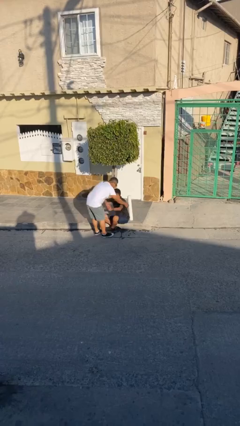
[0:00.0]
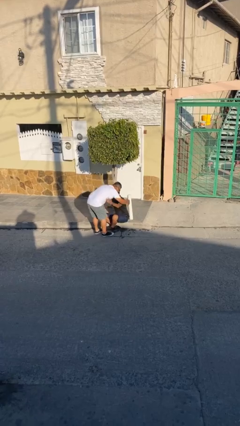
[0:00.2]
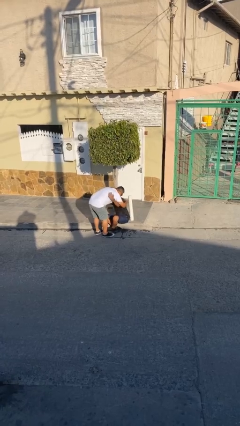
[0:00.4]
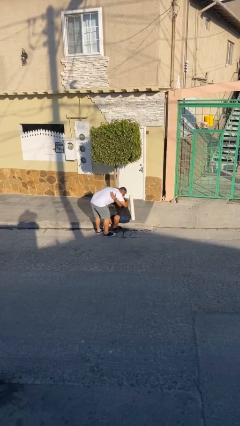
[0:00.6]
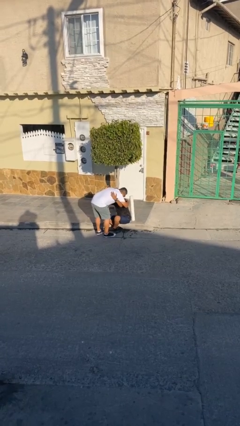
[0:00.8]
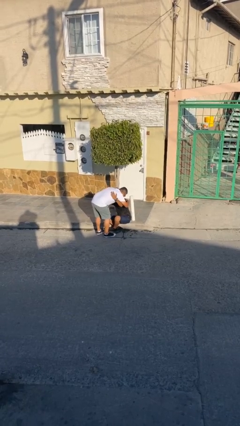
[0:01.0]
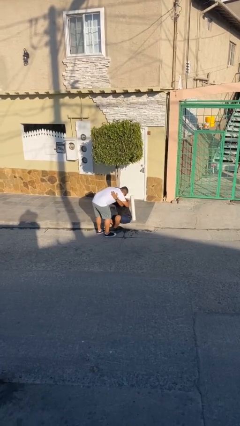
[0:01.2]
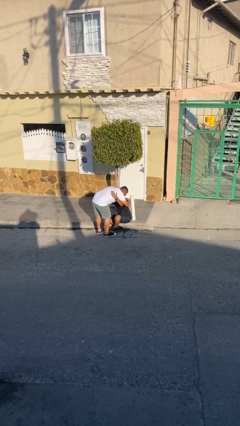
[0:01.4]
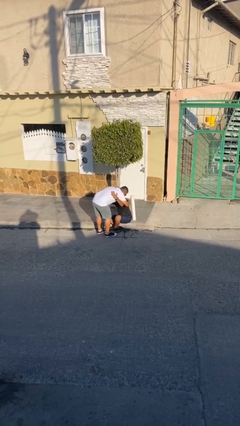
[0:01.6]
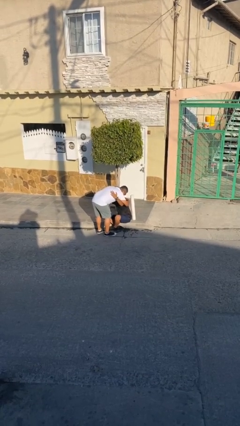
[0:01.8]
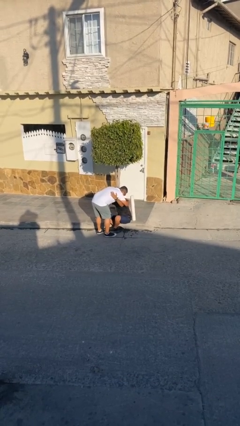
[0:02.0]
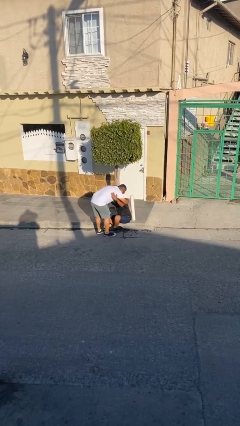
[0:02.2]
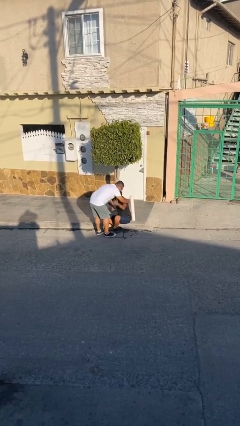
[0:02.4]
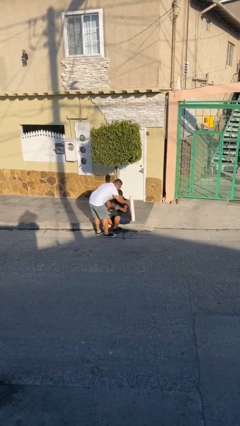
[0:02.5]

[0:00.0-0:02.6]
person embraces person

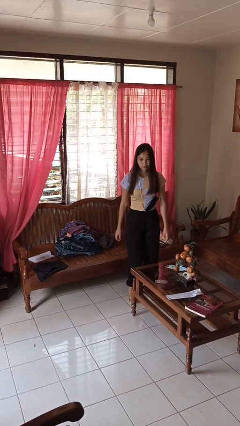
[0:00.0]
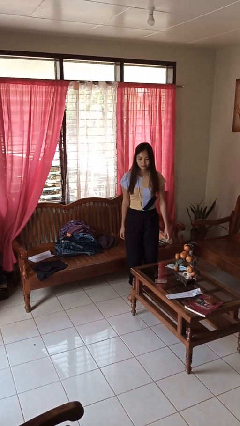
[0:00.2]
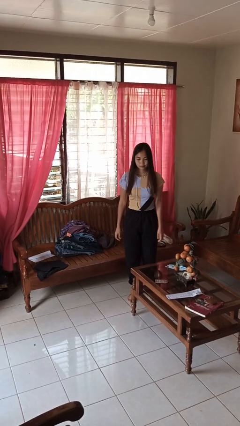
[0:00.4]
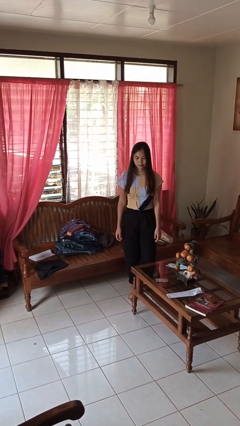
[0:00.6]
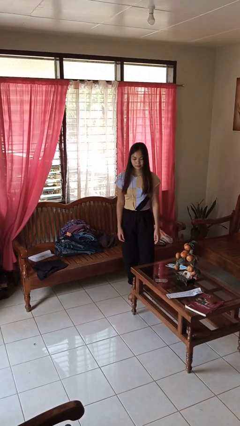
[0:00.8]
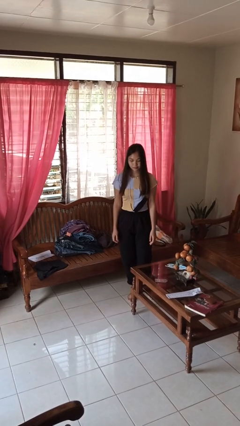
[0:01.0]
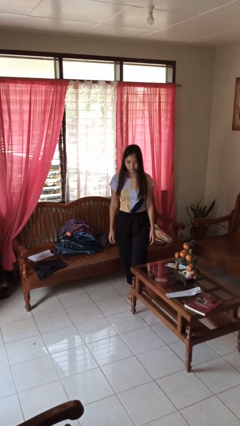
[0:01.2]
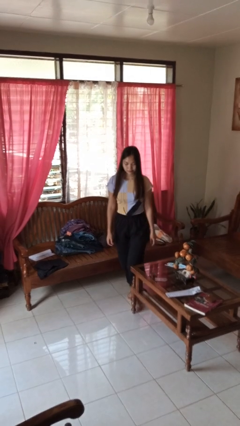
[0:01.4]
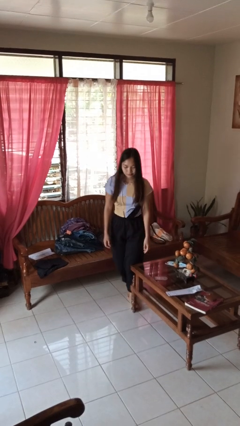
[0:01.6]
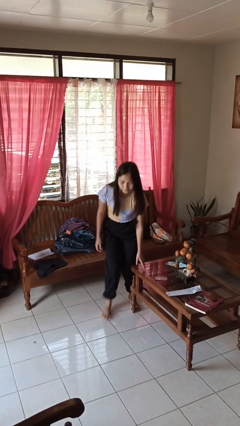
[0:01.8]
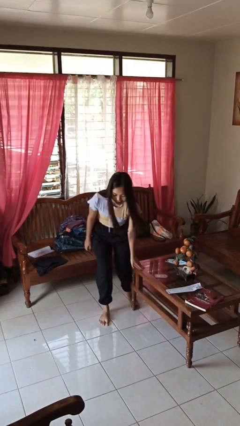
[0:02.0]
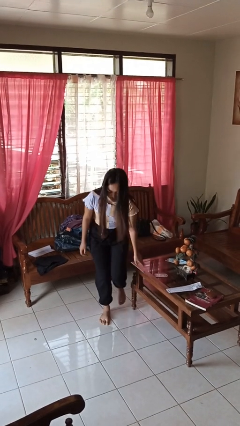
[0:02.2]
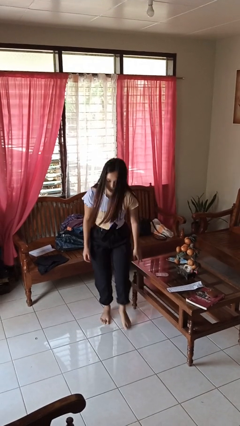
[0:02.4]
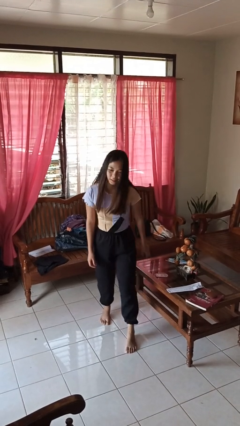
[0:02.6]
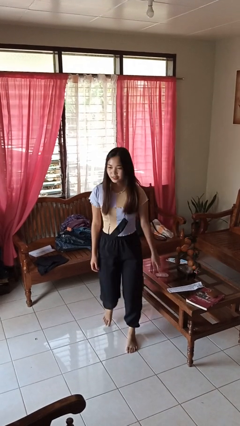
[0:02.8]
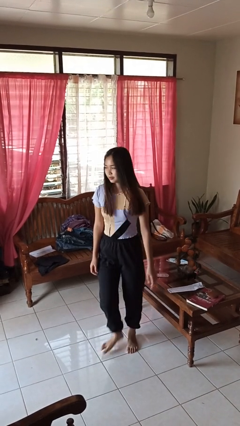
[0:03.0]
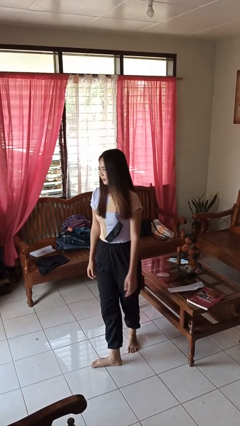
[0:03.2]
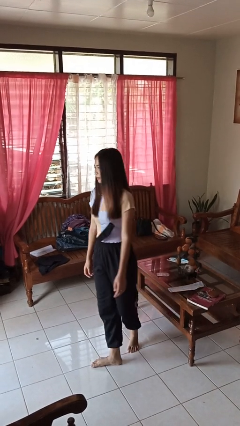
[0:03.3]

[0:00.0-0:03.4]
person bumps into table

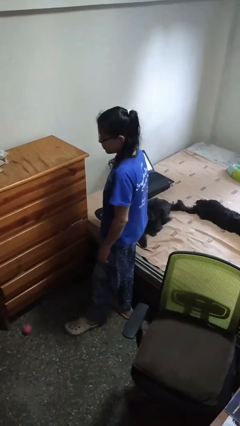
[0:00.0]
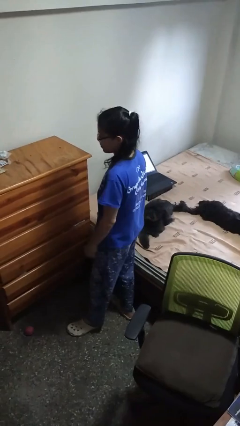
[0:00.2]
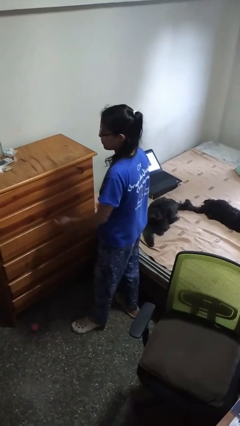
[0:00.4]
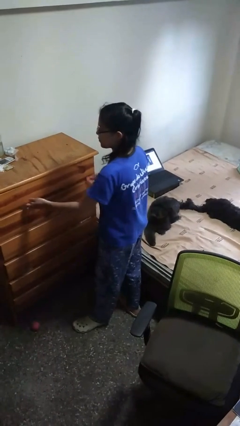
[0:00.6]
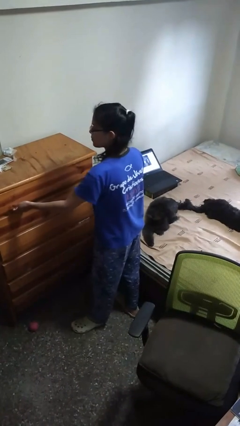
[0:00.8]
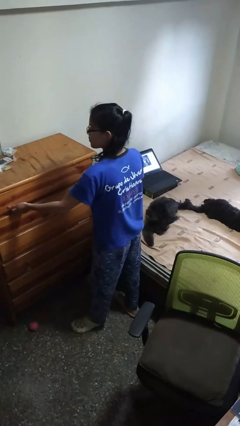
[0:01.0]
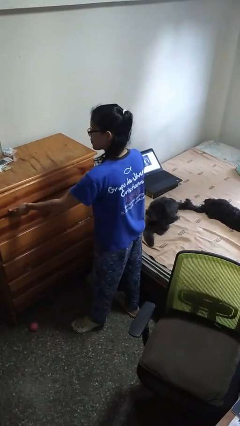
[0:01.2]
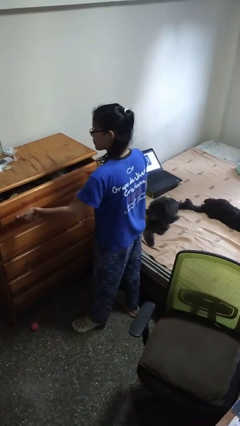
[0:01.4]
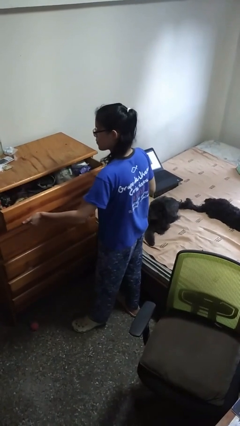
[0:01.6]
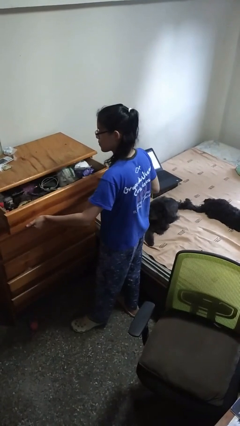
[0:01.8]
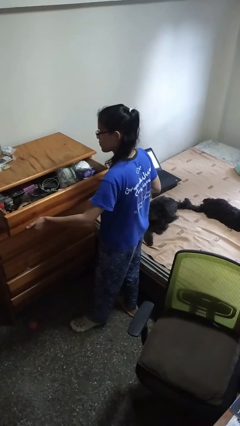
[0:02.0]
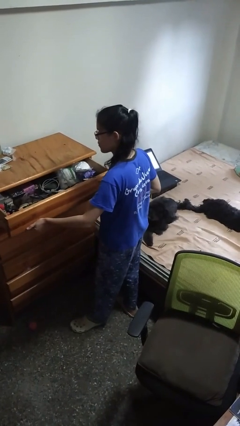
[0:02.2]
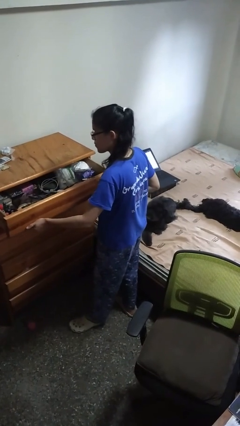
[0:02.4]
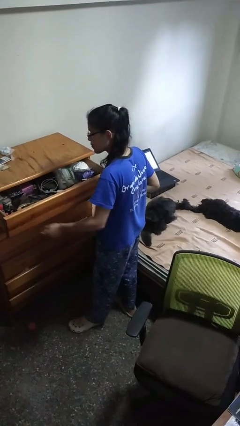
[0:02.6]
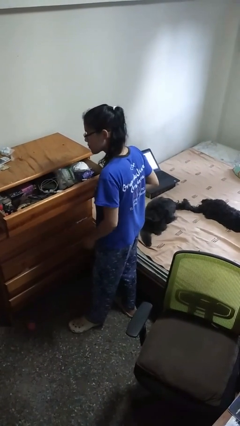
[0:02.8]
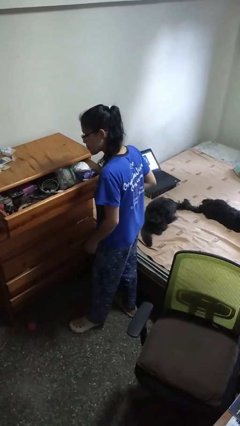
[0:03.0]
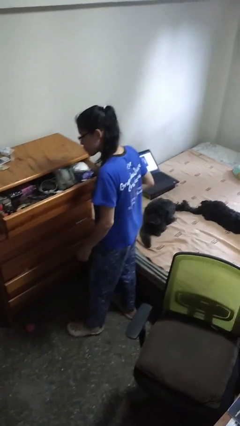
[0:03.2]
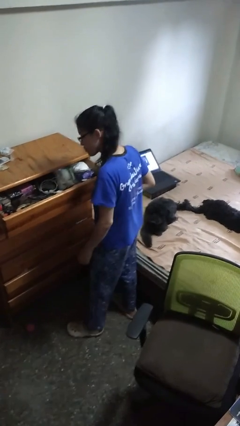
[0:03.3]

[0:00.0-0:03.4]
person opens dresser drawer

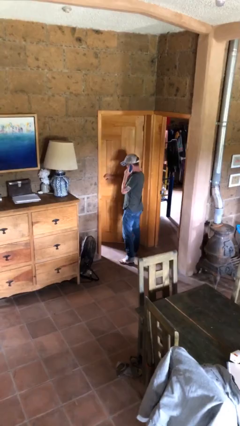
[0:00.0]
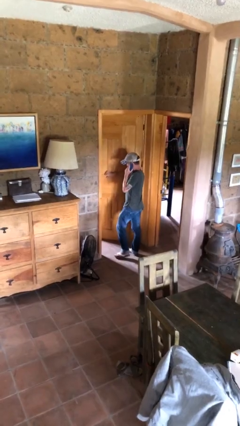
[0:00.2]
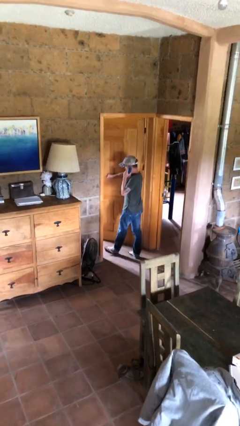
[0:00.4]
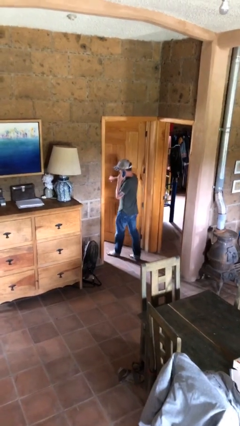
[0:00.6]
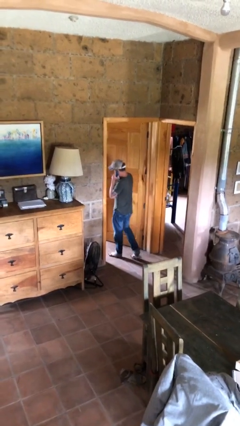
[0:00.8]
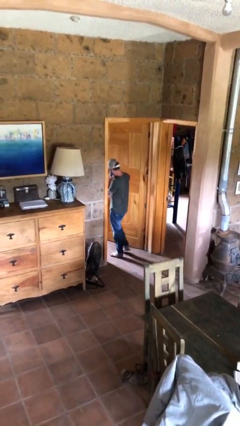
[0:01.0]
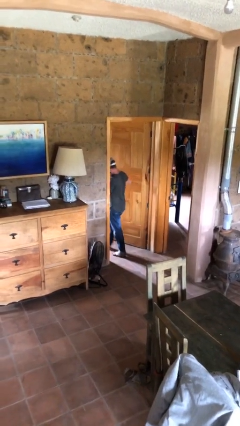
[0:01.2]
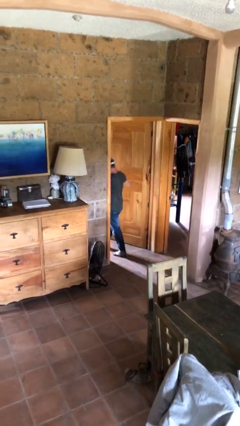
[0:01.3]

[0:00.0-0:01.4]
person exits scene through structure

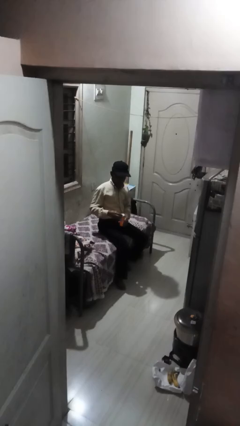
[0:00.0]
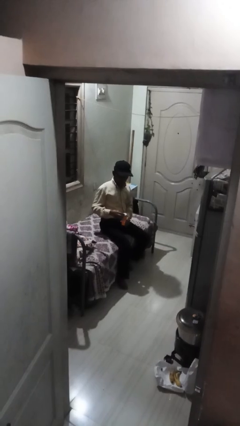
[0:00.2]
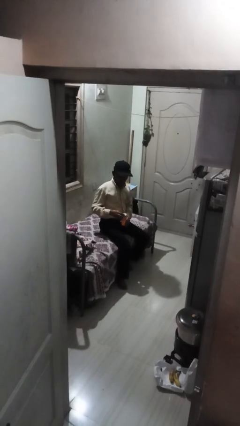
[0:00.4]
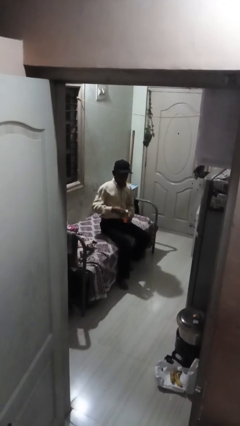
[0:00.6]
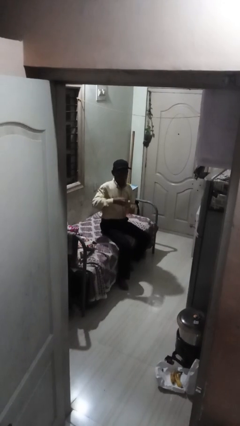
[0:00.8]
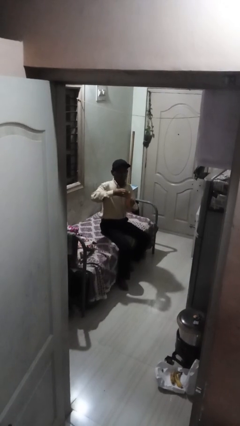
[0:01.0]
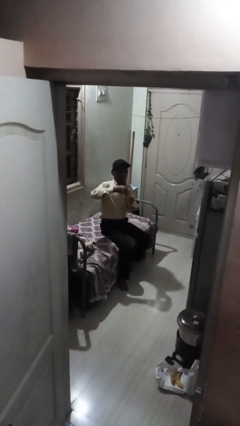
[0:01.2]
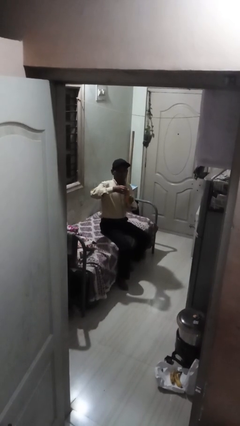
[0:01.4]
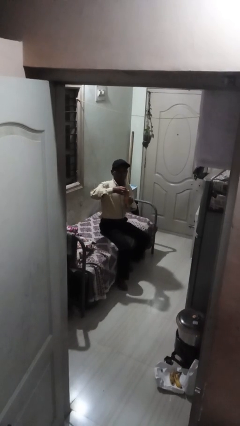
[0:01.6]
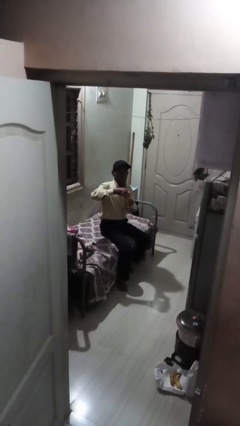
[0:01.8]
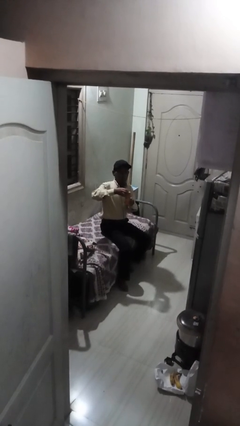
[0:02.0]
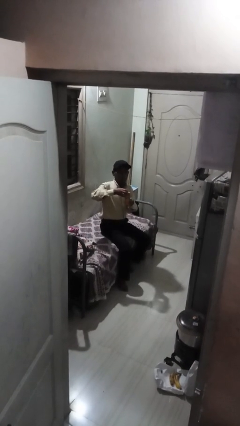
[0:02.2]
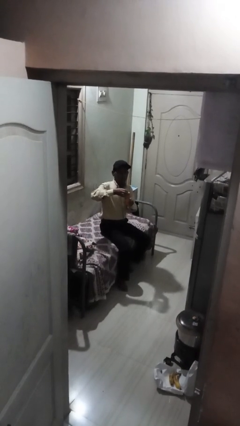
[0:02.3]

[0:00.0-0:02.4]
person opens beverage can

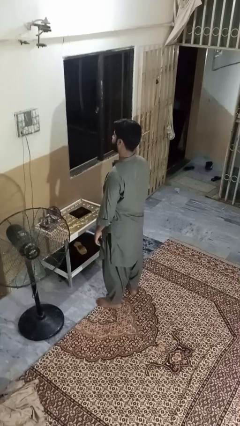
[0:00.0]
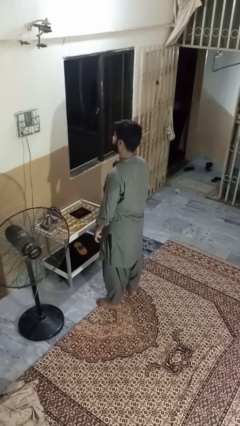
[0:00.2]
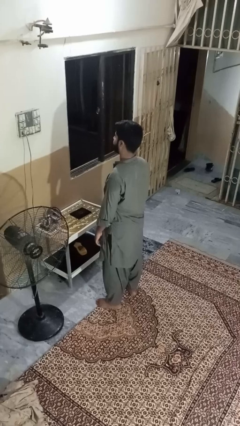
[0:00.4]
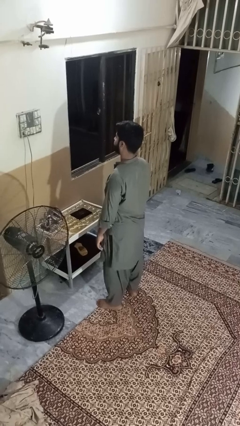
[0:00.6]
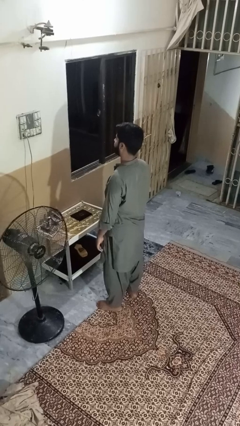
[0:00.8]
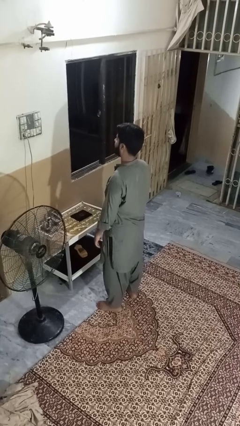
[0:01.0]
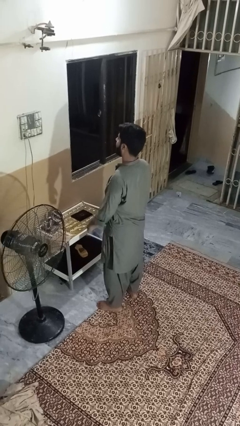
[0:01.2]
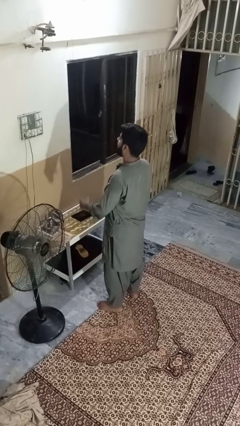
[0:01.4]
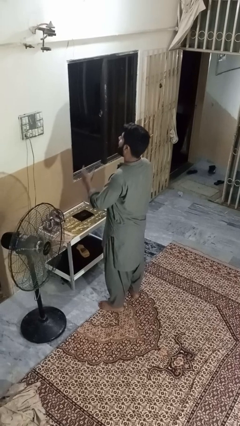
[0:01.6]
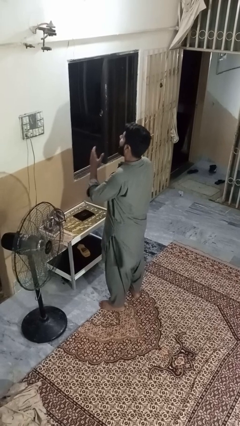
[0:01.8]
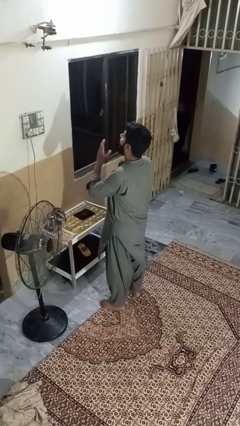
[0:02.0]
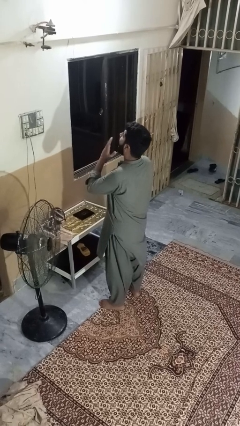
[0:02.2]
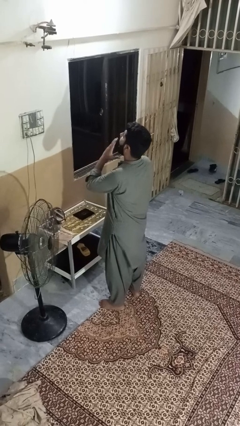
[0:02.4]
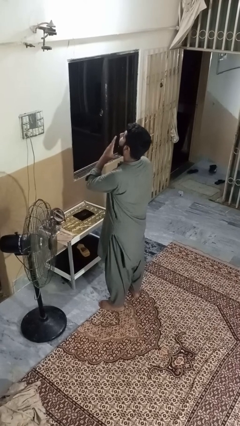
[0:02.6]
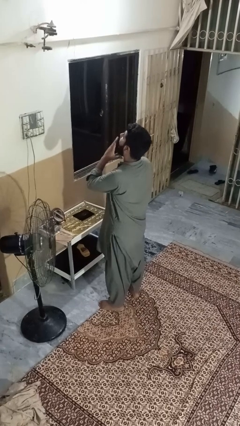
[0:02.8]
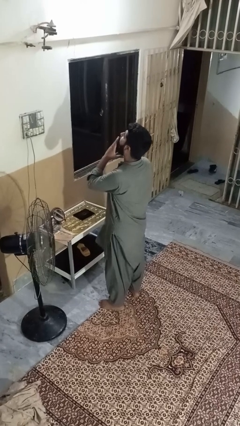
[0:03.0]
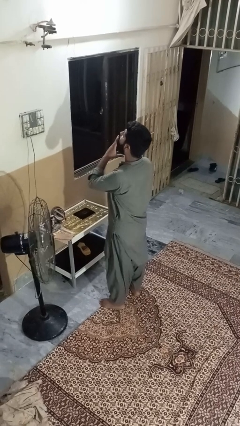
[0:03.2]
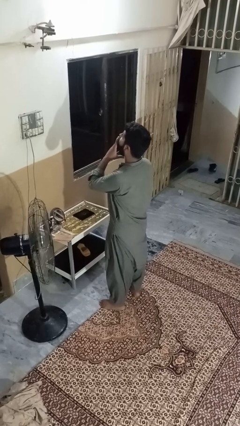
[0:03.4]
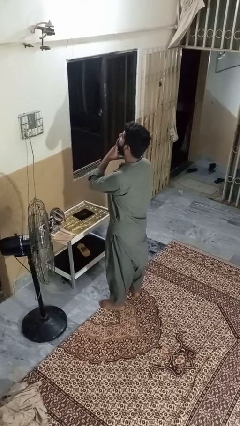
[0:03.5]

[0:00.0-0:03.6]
person yawns

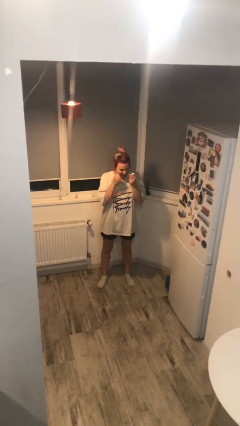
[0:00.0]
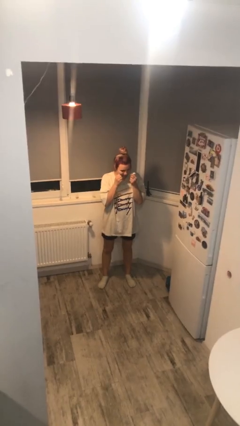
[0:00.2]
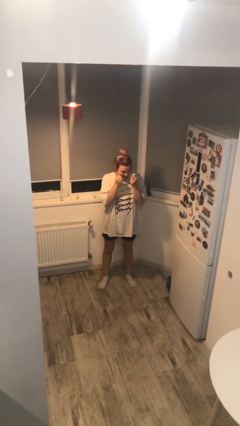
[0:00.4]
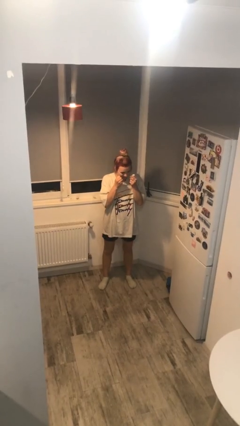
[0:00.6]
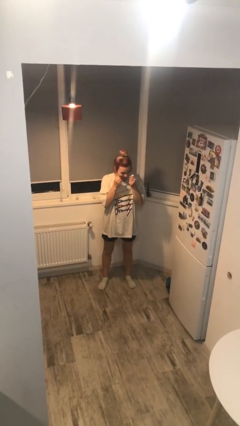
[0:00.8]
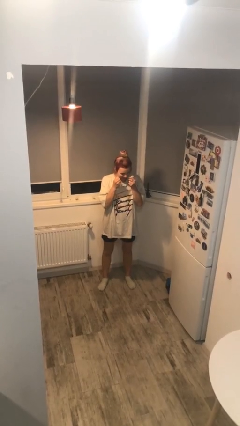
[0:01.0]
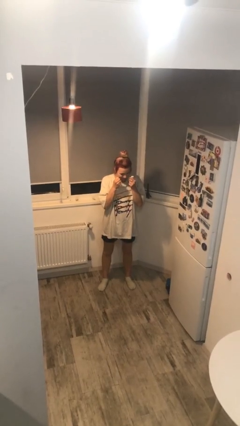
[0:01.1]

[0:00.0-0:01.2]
person flosses
